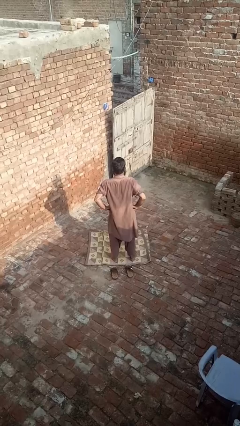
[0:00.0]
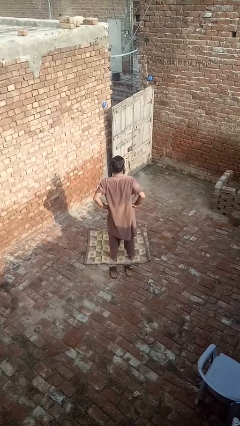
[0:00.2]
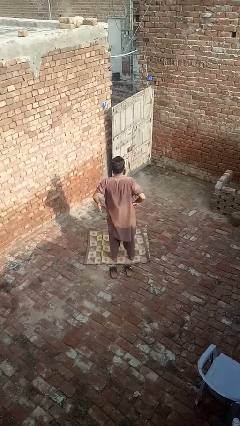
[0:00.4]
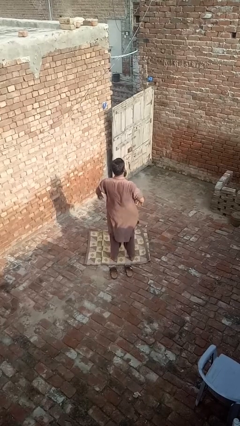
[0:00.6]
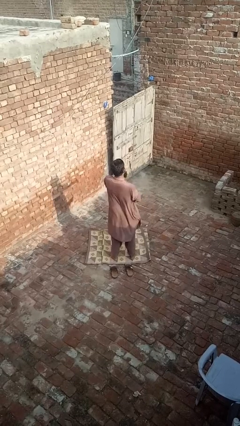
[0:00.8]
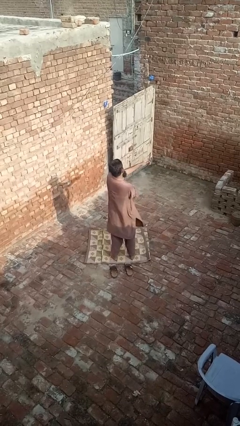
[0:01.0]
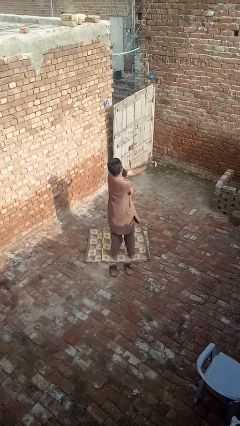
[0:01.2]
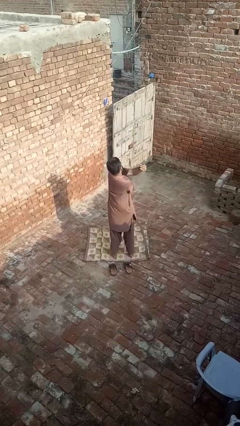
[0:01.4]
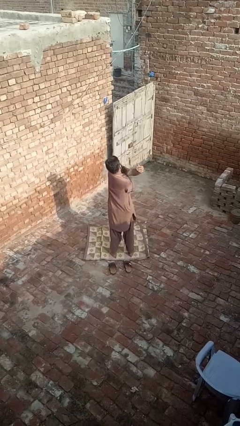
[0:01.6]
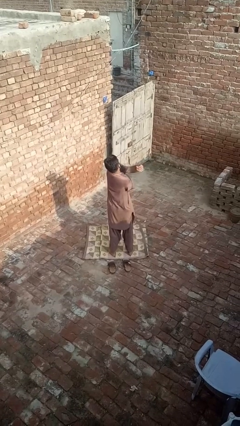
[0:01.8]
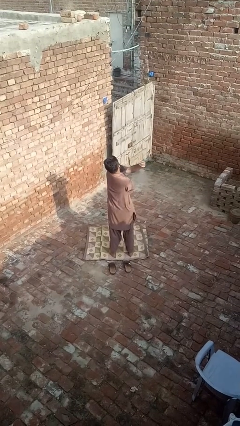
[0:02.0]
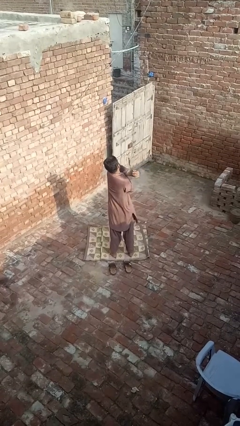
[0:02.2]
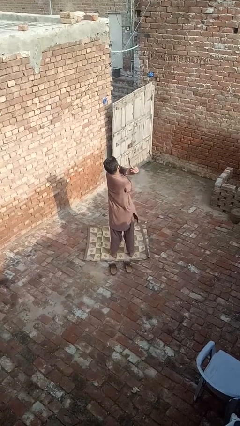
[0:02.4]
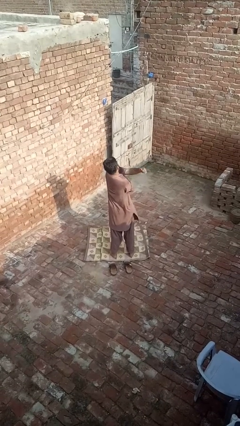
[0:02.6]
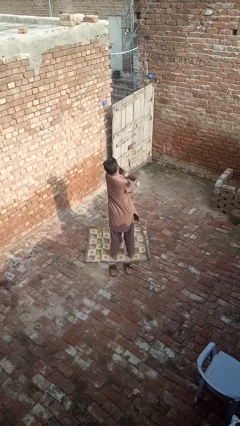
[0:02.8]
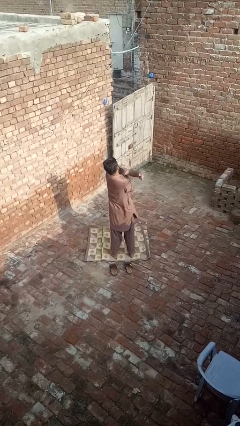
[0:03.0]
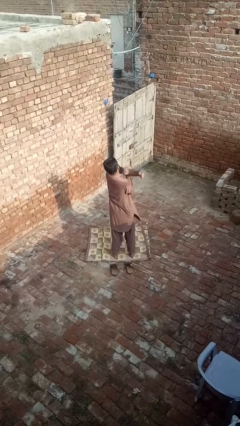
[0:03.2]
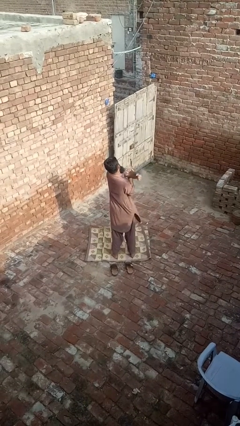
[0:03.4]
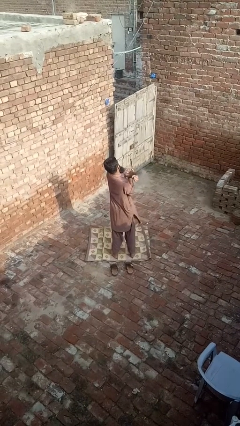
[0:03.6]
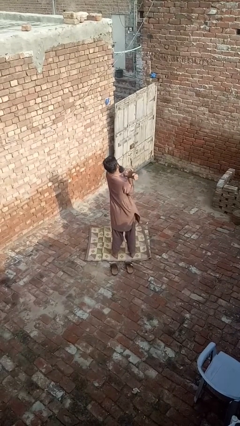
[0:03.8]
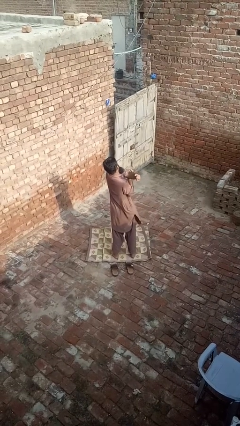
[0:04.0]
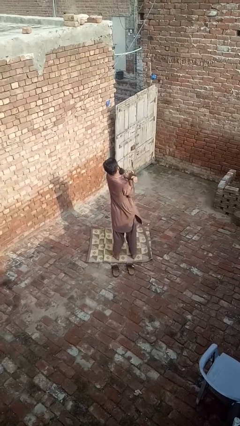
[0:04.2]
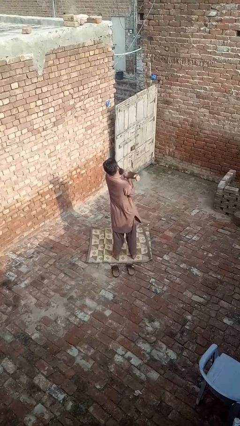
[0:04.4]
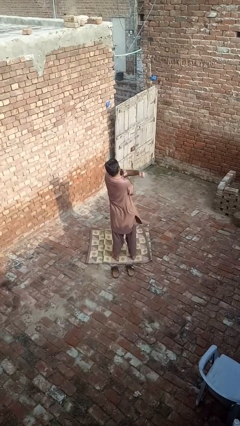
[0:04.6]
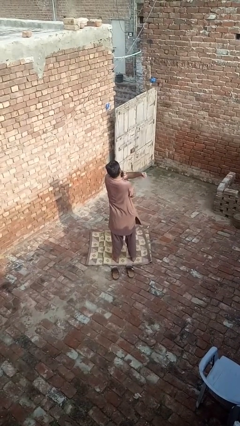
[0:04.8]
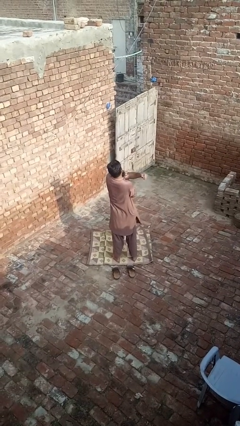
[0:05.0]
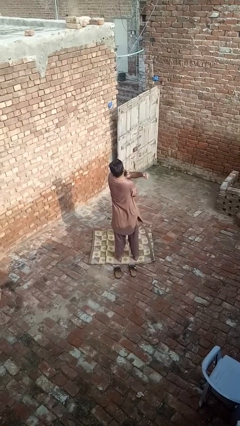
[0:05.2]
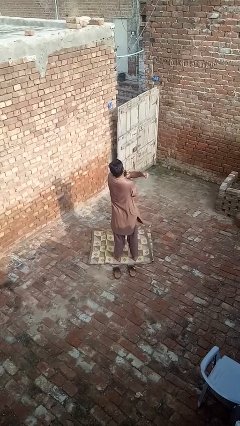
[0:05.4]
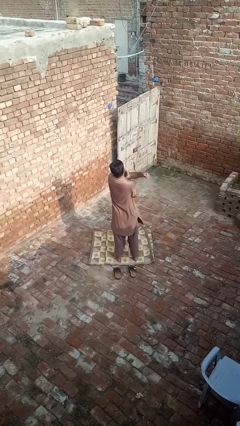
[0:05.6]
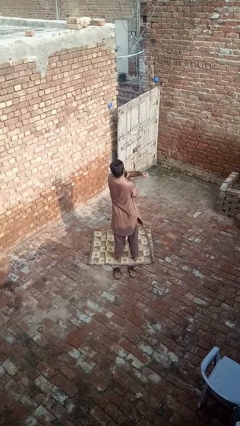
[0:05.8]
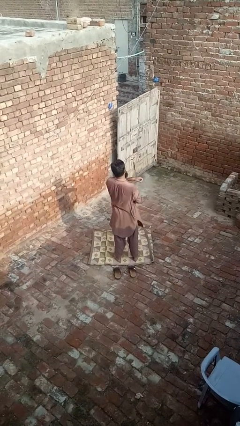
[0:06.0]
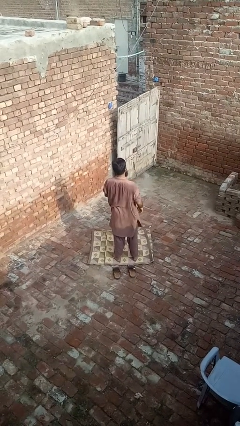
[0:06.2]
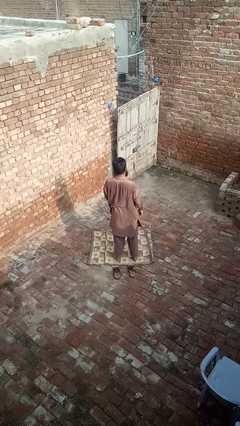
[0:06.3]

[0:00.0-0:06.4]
person stretches arms to side

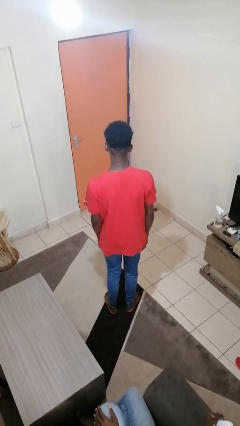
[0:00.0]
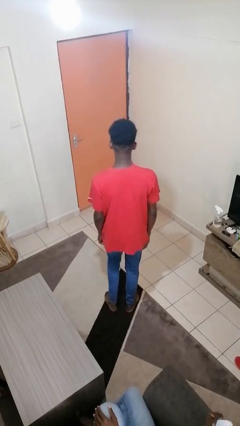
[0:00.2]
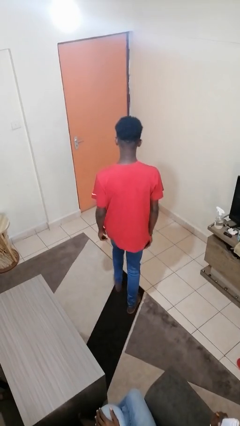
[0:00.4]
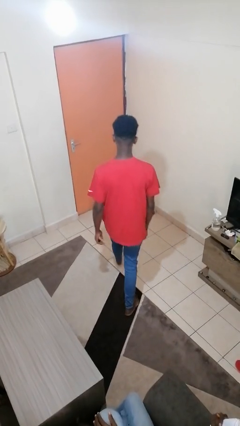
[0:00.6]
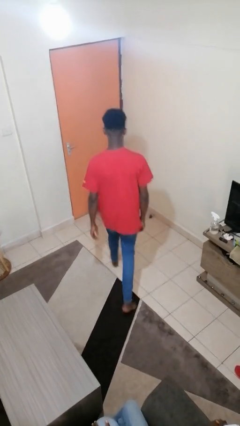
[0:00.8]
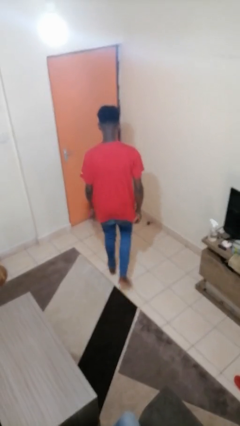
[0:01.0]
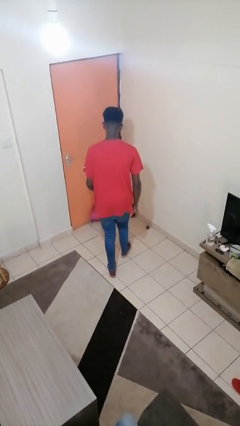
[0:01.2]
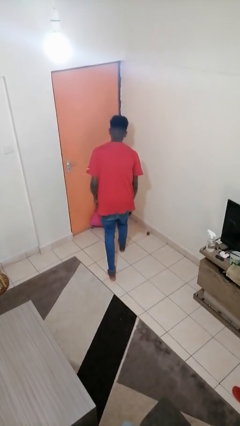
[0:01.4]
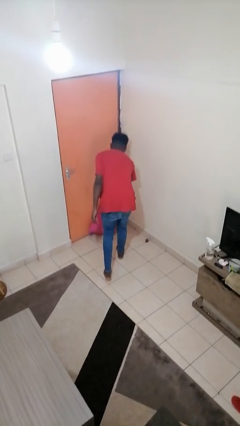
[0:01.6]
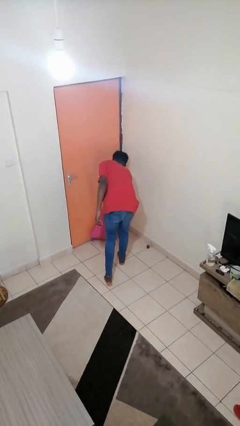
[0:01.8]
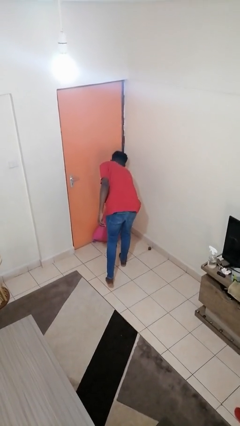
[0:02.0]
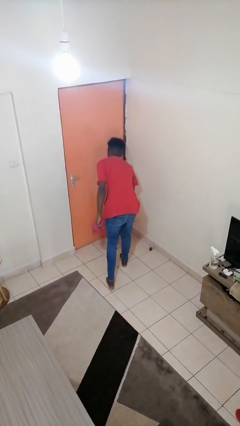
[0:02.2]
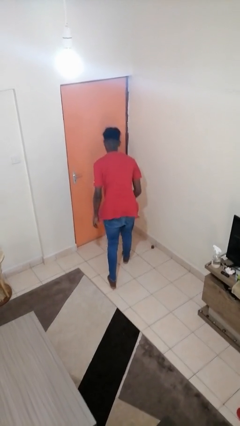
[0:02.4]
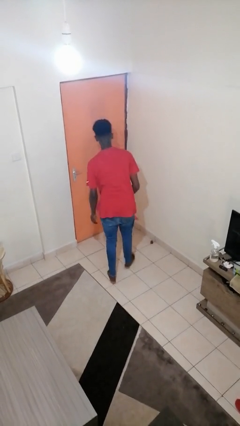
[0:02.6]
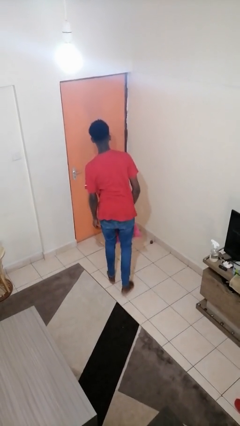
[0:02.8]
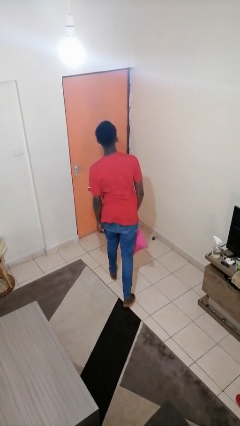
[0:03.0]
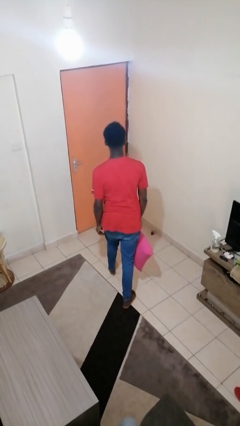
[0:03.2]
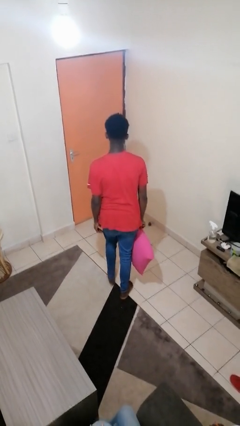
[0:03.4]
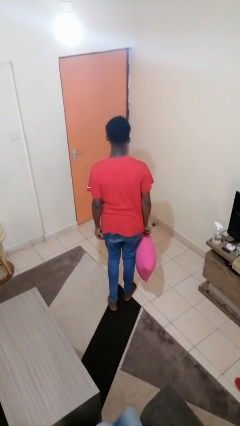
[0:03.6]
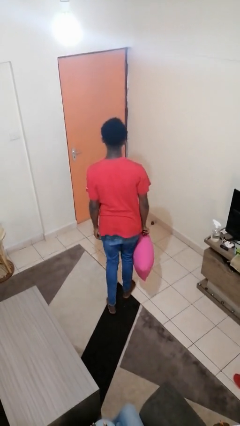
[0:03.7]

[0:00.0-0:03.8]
person picks up object from floor

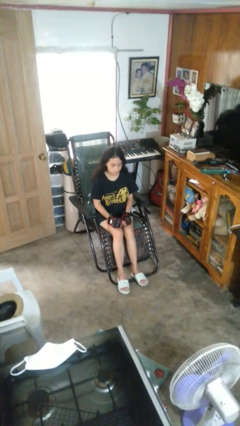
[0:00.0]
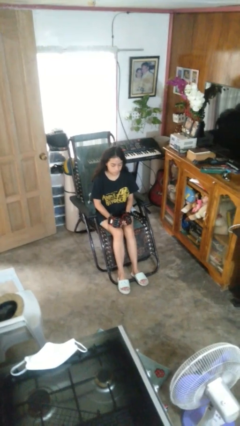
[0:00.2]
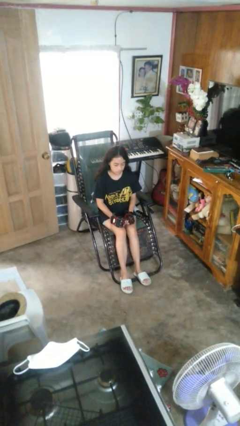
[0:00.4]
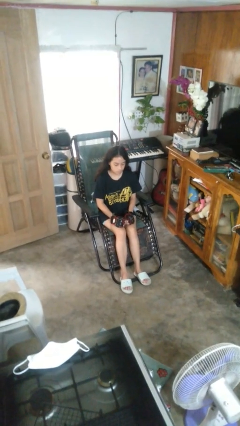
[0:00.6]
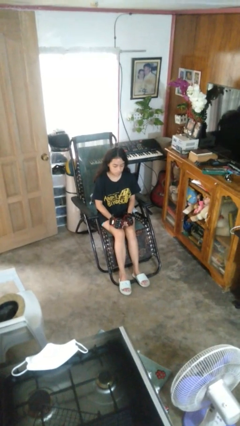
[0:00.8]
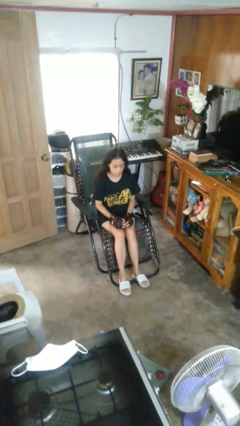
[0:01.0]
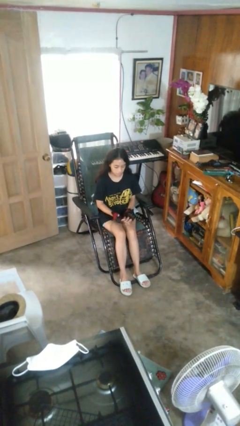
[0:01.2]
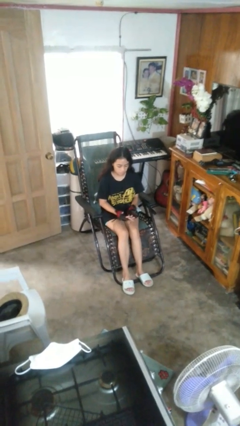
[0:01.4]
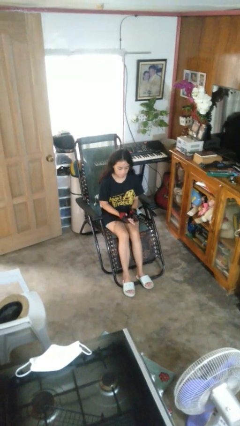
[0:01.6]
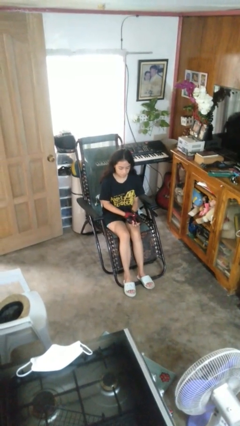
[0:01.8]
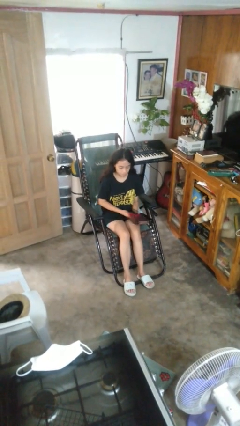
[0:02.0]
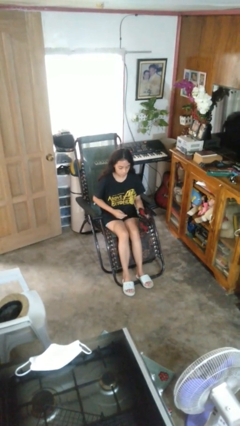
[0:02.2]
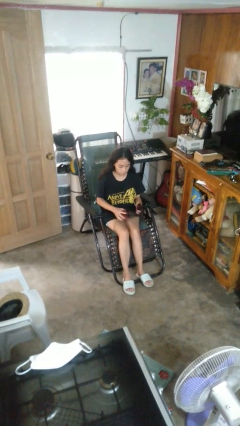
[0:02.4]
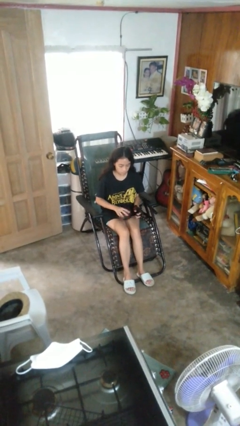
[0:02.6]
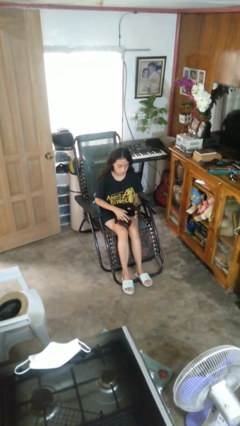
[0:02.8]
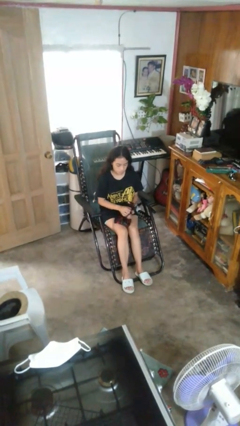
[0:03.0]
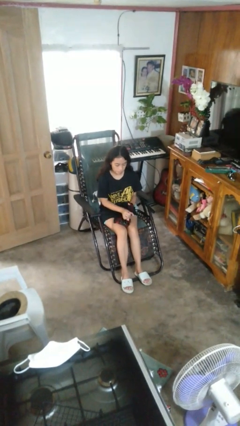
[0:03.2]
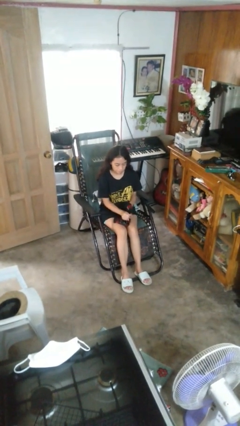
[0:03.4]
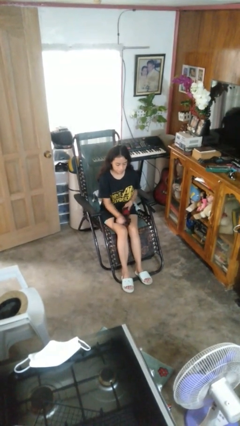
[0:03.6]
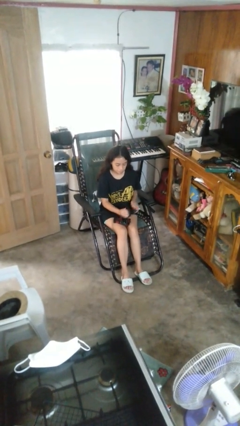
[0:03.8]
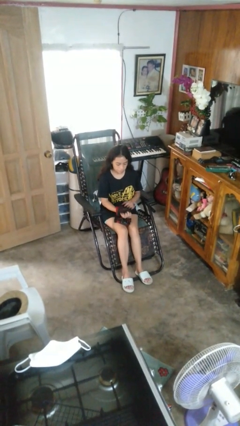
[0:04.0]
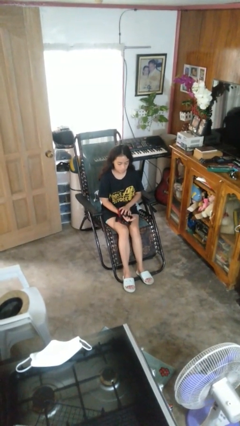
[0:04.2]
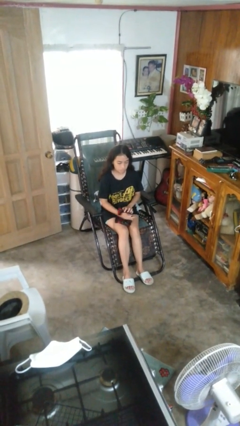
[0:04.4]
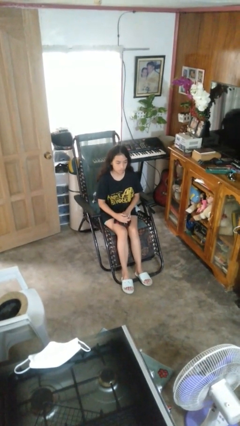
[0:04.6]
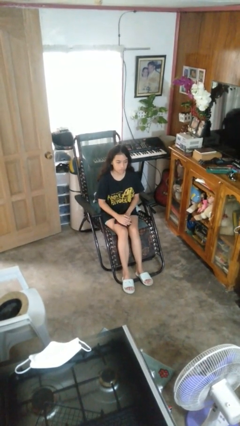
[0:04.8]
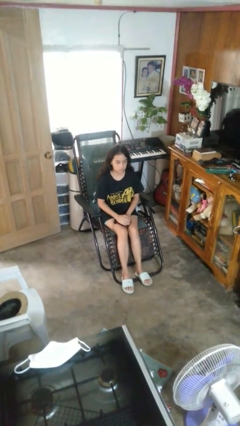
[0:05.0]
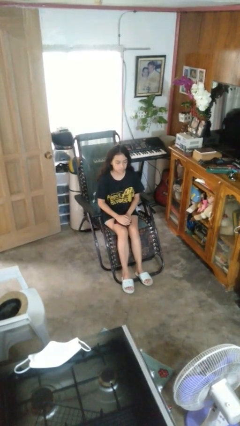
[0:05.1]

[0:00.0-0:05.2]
person takes off gloves

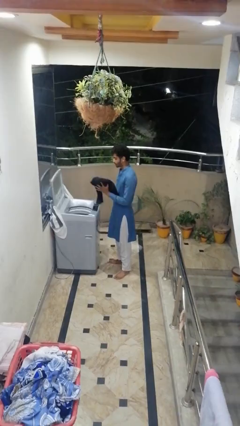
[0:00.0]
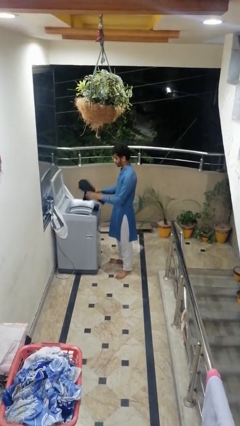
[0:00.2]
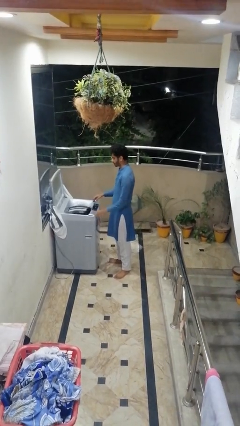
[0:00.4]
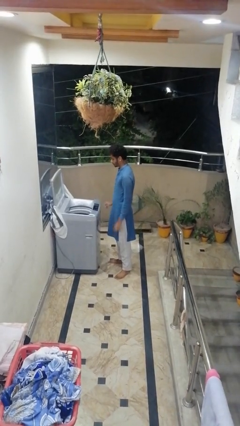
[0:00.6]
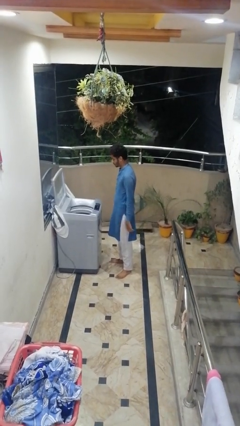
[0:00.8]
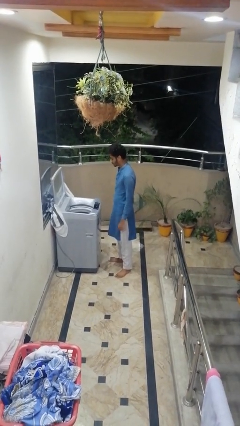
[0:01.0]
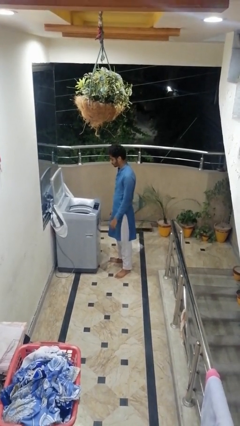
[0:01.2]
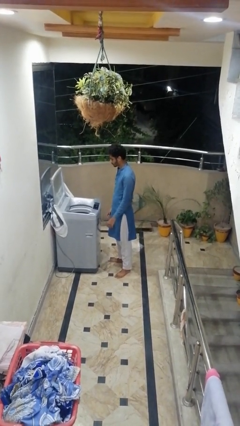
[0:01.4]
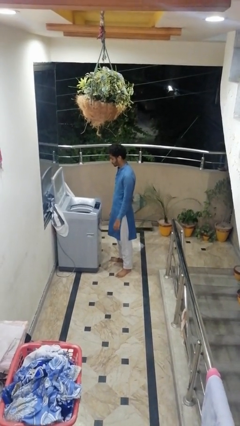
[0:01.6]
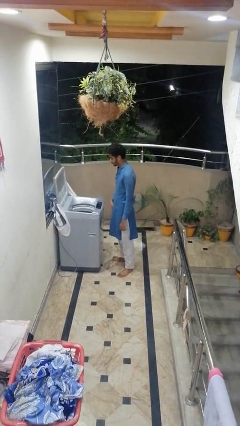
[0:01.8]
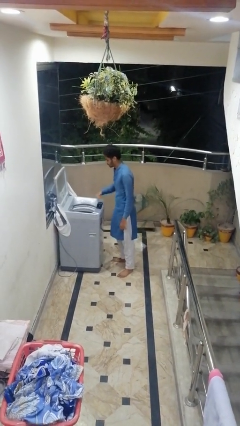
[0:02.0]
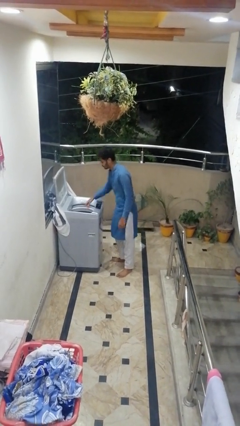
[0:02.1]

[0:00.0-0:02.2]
person loads clotheswasher
